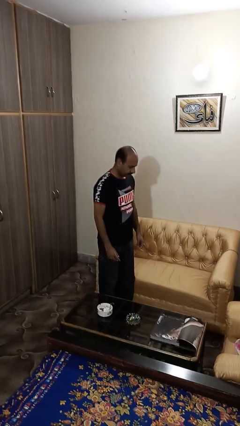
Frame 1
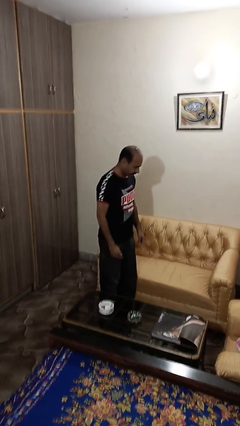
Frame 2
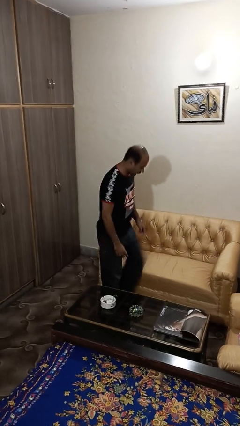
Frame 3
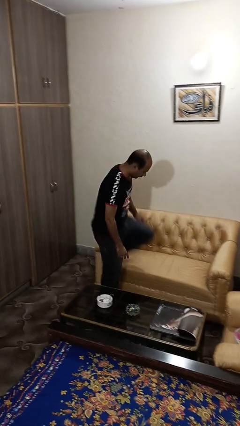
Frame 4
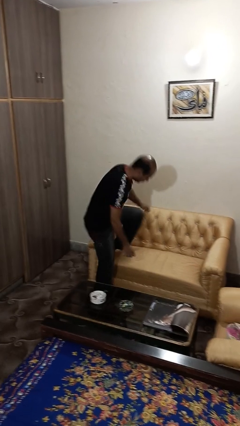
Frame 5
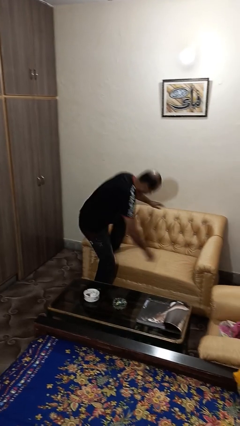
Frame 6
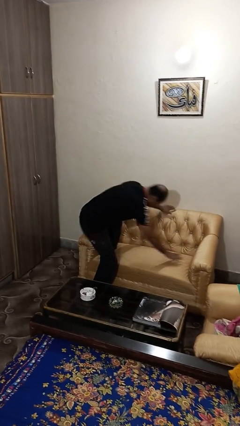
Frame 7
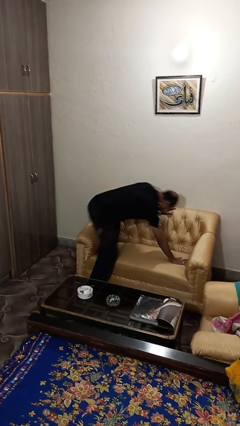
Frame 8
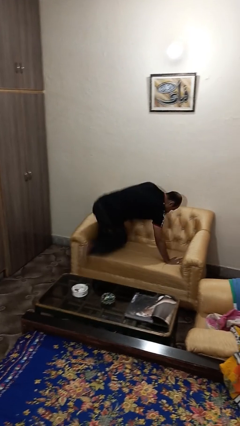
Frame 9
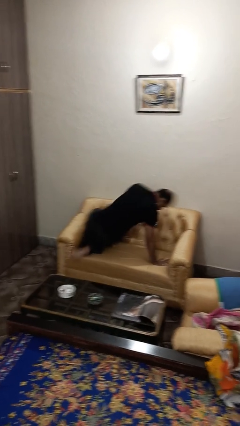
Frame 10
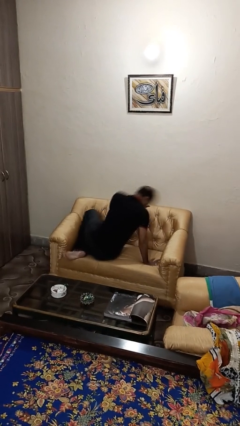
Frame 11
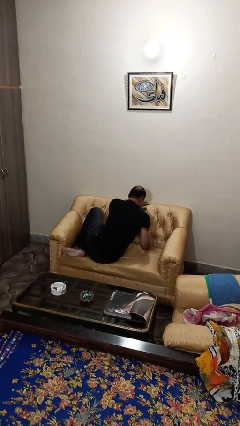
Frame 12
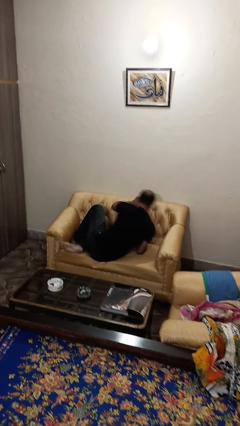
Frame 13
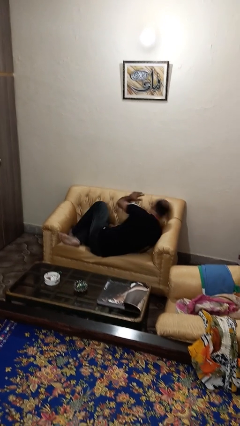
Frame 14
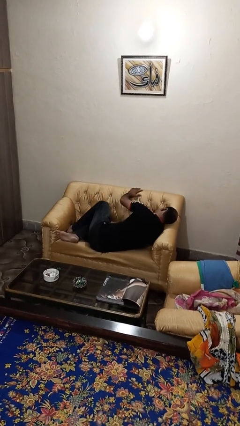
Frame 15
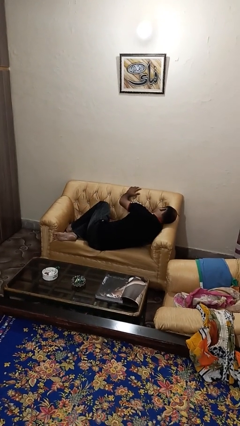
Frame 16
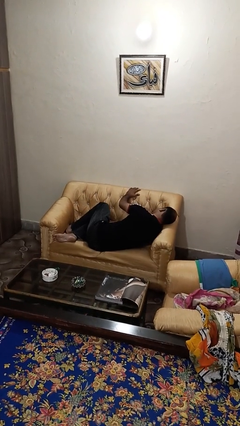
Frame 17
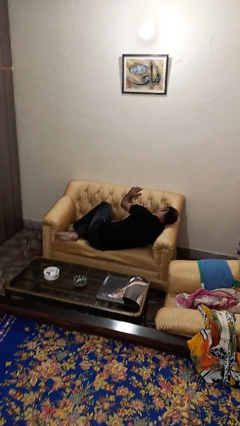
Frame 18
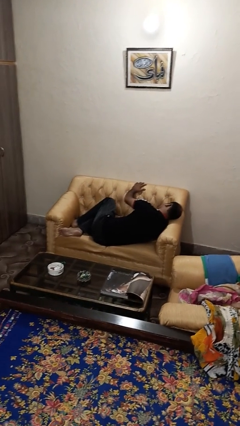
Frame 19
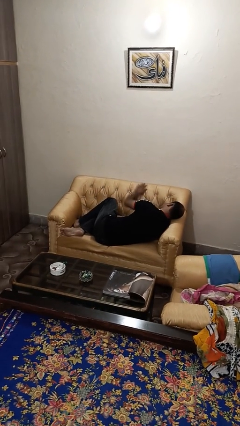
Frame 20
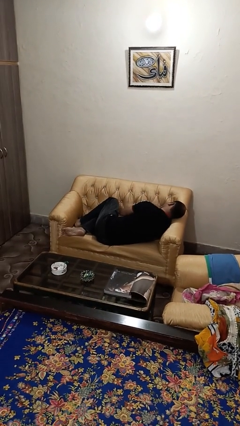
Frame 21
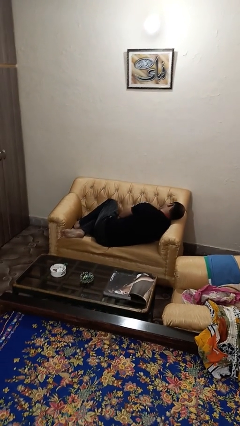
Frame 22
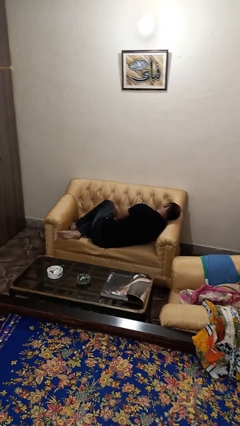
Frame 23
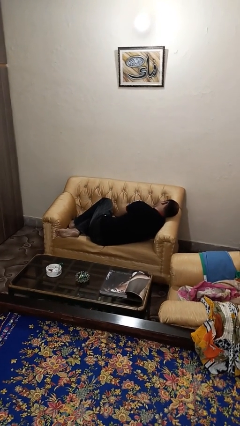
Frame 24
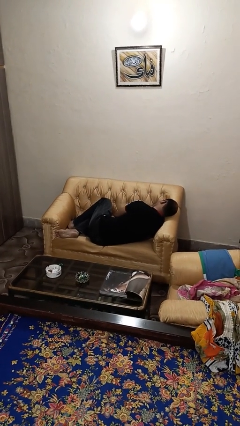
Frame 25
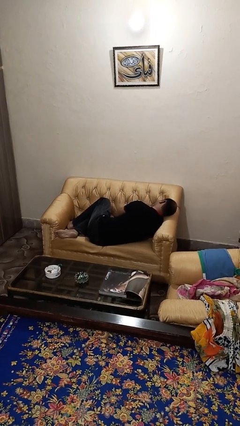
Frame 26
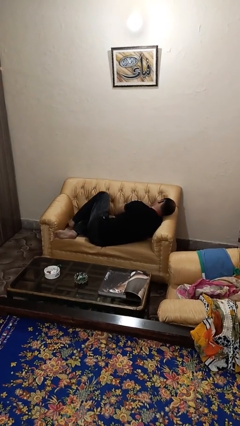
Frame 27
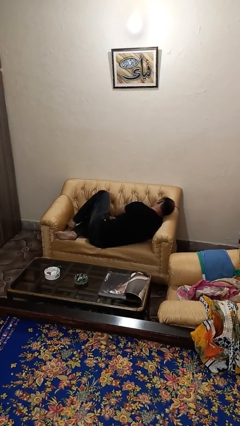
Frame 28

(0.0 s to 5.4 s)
person lies down on couch

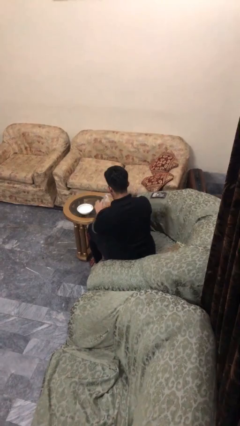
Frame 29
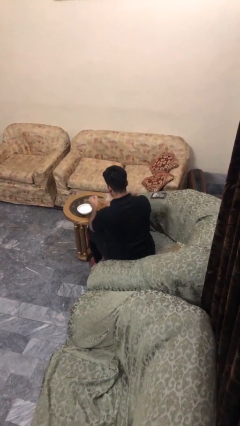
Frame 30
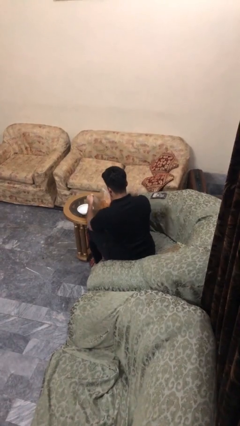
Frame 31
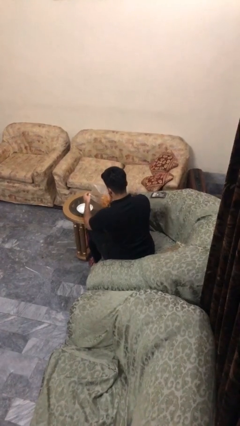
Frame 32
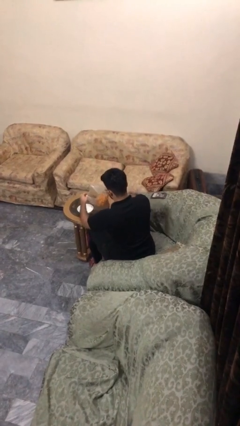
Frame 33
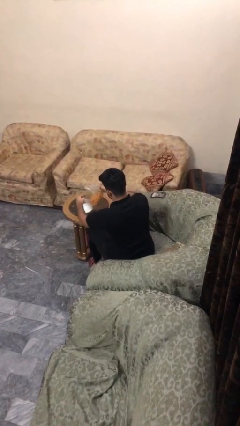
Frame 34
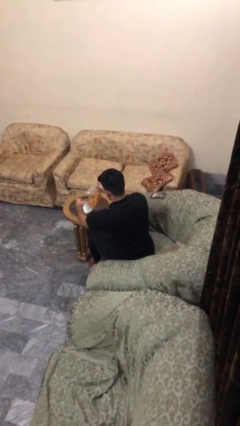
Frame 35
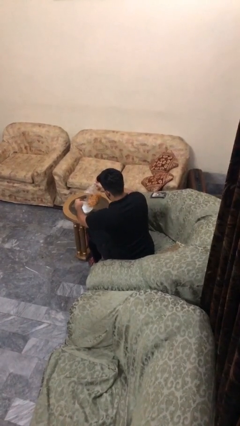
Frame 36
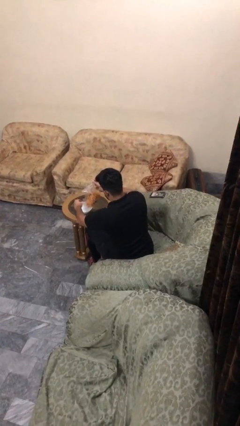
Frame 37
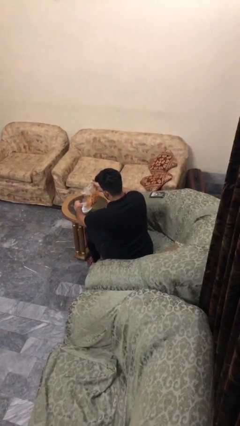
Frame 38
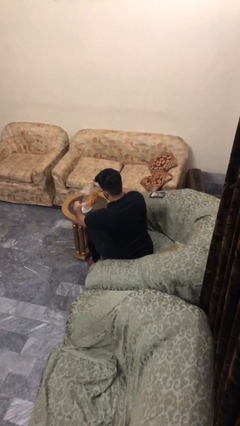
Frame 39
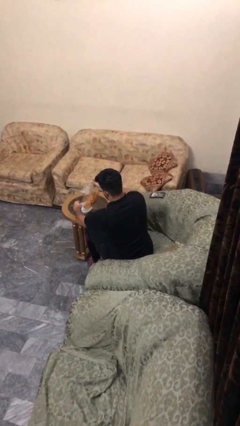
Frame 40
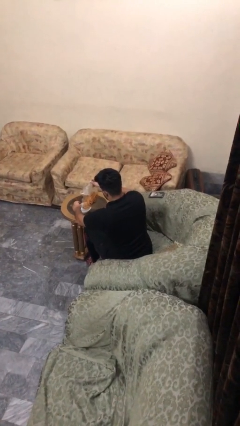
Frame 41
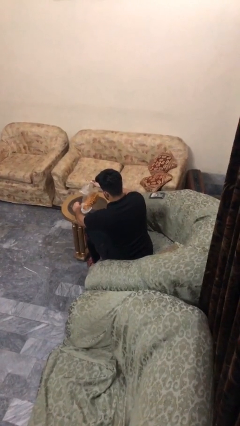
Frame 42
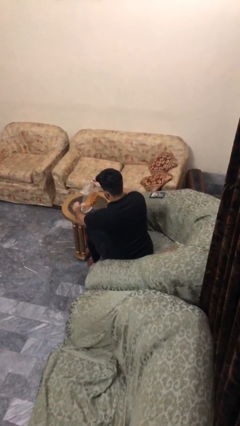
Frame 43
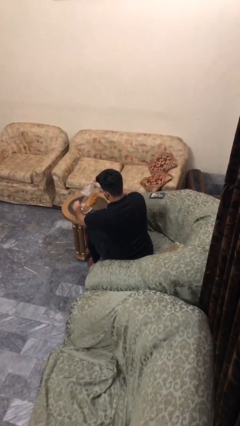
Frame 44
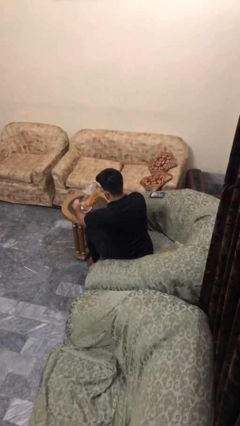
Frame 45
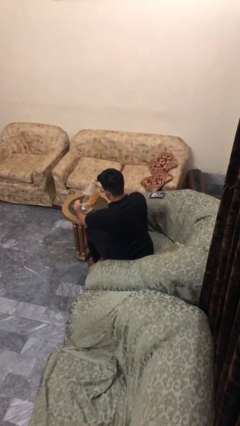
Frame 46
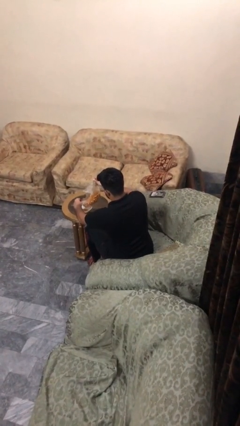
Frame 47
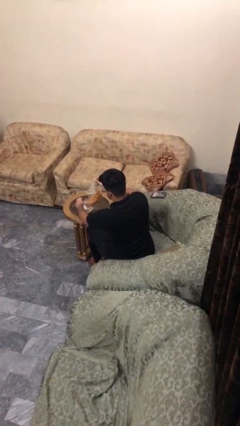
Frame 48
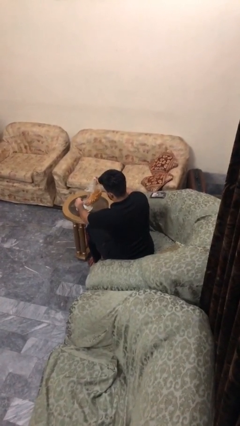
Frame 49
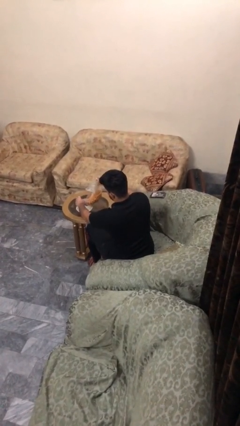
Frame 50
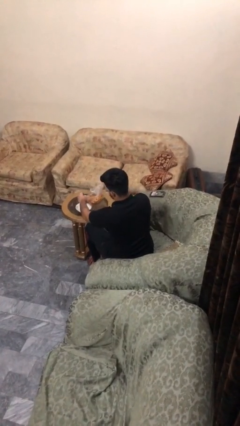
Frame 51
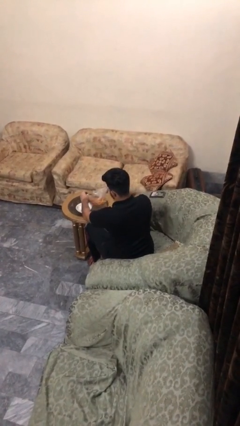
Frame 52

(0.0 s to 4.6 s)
person pours into bowl

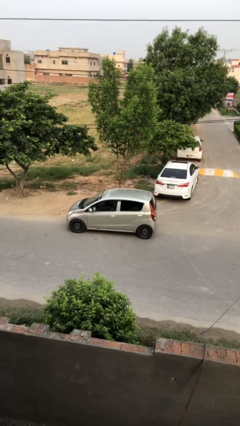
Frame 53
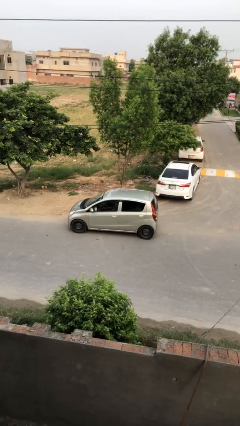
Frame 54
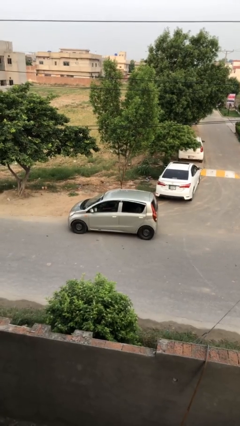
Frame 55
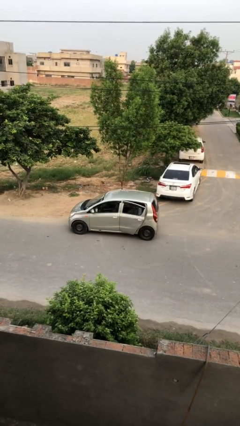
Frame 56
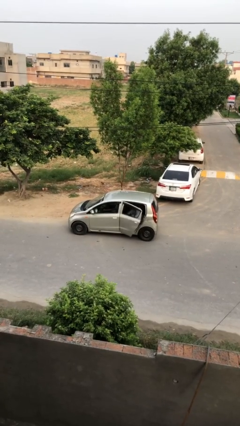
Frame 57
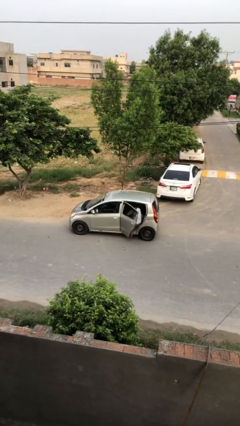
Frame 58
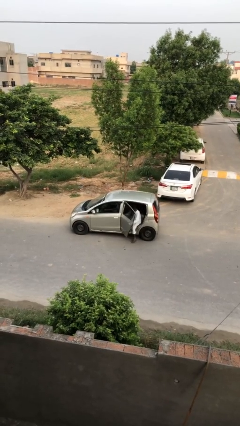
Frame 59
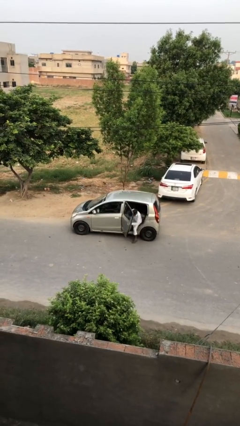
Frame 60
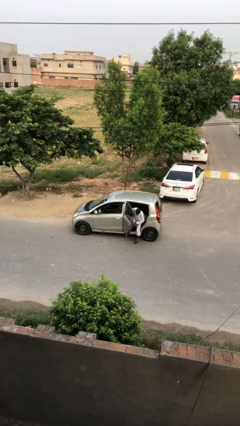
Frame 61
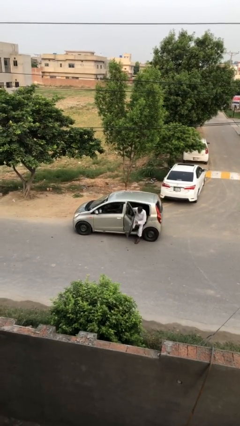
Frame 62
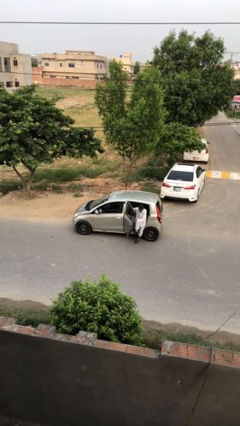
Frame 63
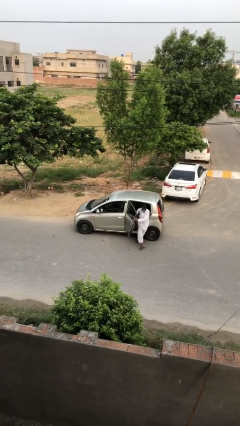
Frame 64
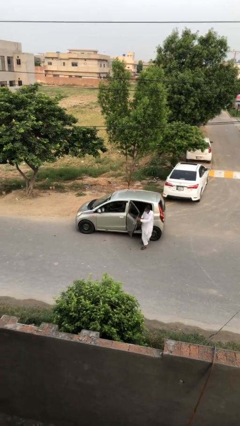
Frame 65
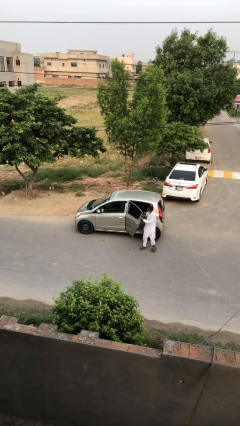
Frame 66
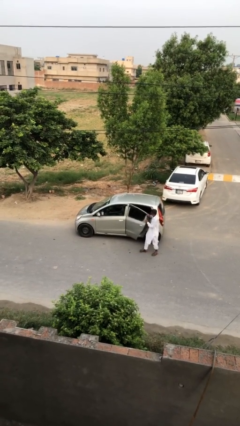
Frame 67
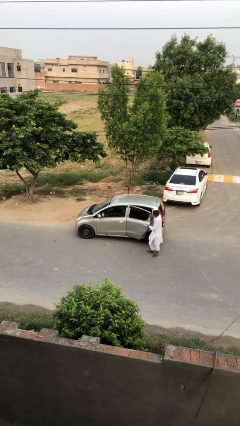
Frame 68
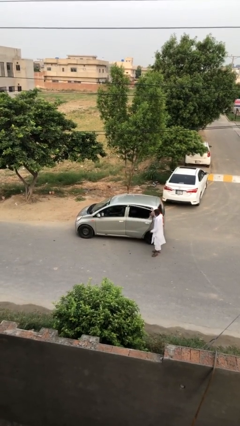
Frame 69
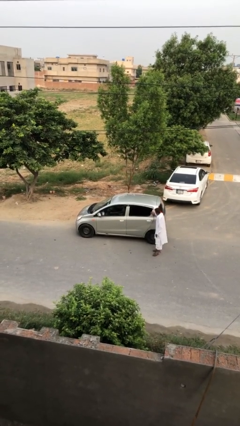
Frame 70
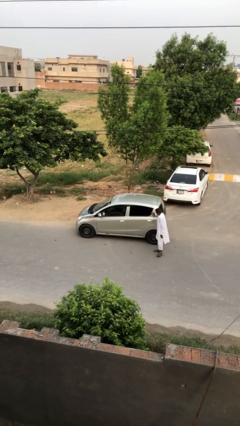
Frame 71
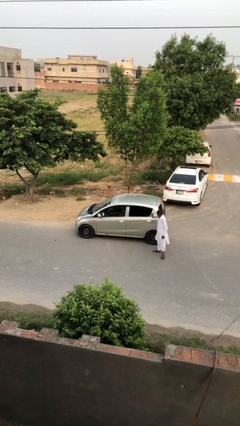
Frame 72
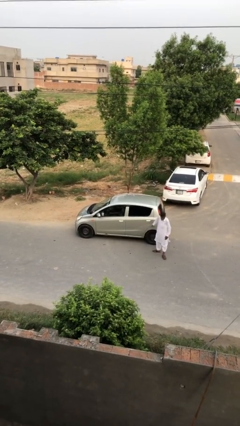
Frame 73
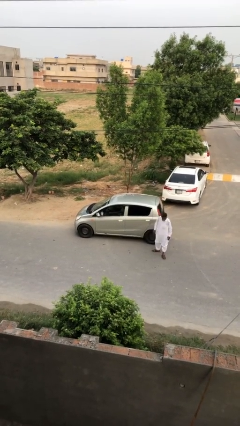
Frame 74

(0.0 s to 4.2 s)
car drops off person

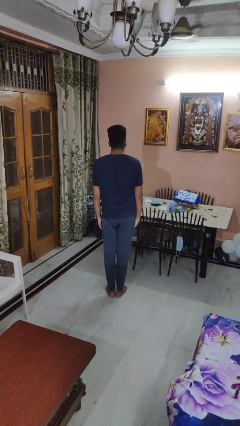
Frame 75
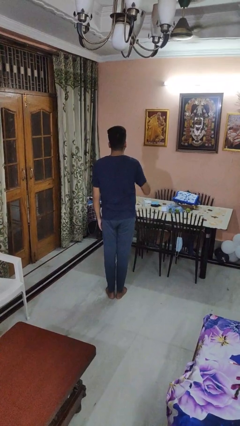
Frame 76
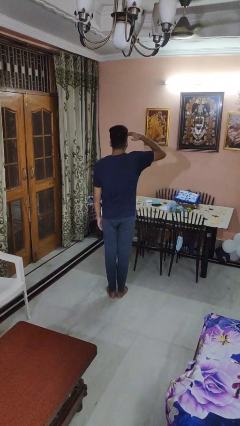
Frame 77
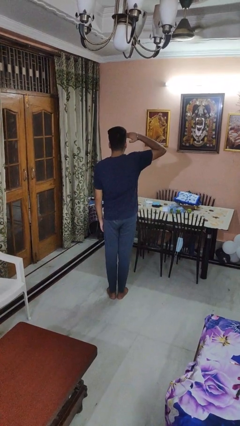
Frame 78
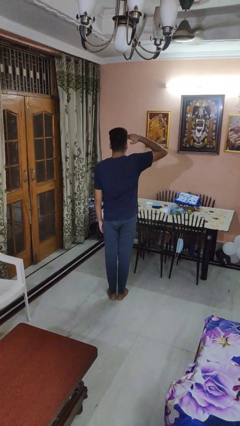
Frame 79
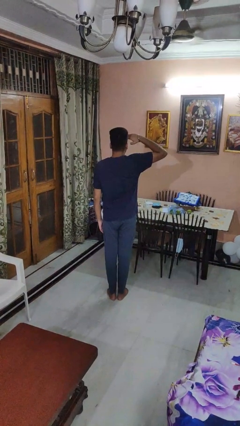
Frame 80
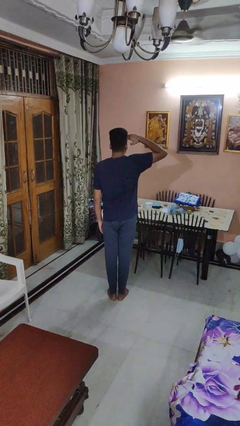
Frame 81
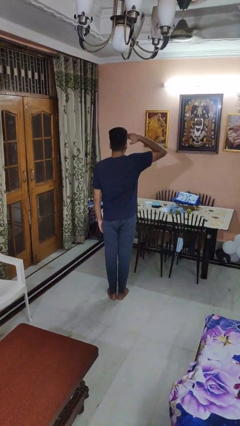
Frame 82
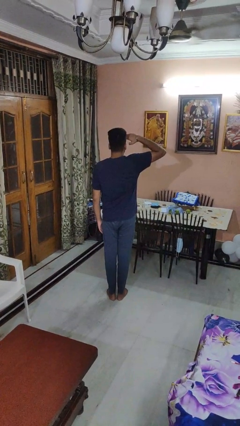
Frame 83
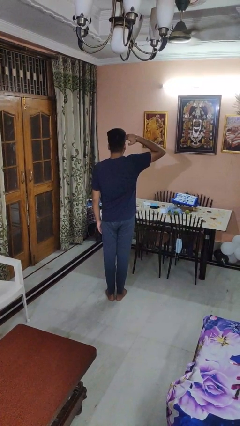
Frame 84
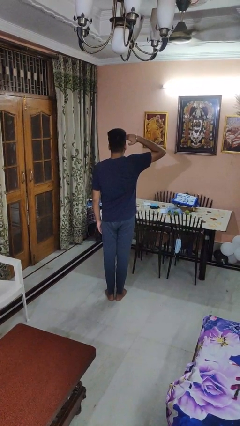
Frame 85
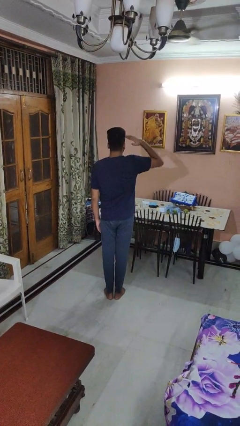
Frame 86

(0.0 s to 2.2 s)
person salutes

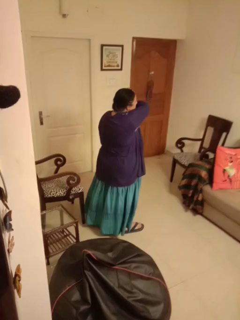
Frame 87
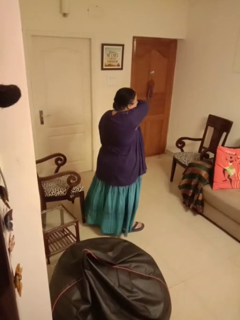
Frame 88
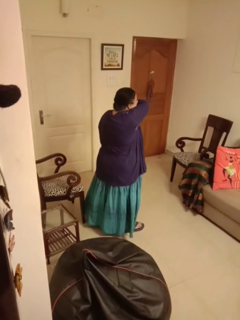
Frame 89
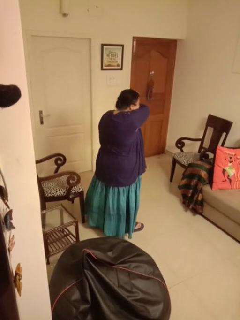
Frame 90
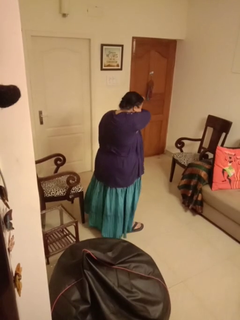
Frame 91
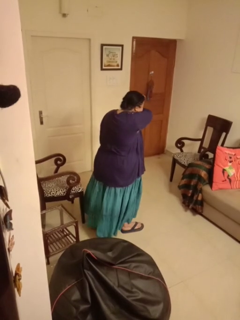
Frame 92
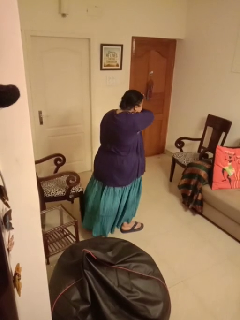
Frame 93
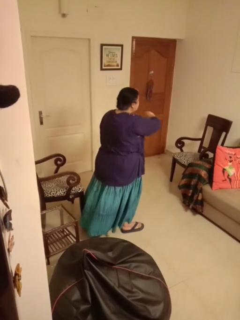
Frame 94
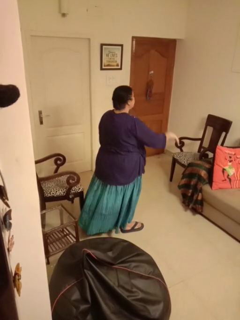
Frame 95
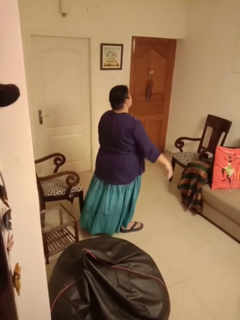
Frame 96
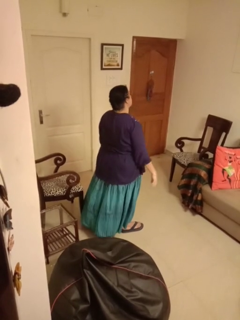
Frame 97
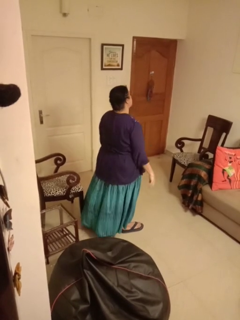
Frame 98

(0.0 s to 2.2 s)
person sneezes into arm
